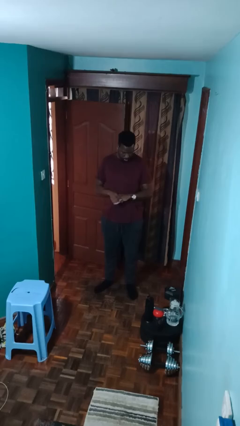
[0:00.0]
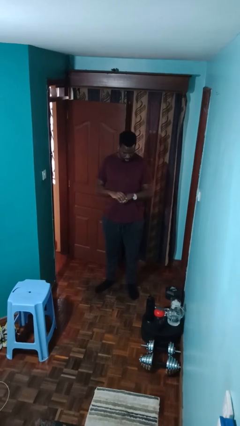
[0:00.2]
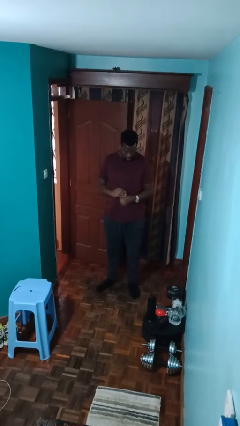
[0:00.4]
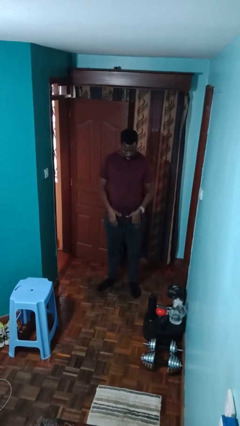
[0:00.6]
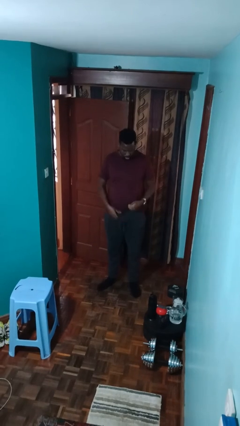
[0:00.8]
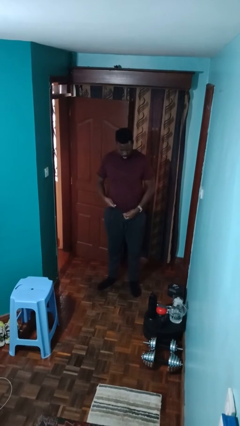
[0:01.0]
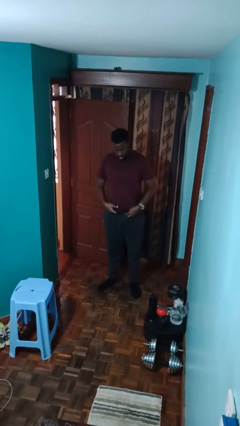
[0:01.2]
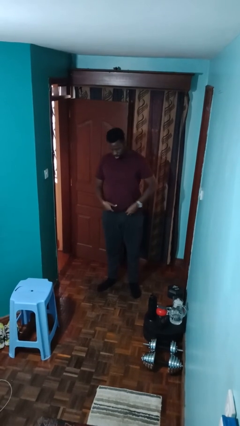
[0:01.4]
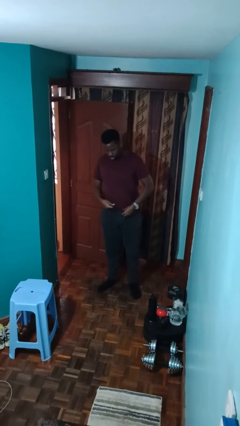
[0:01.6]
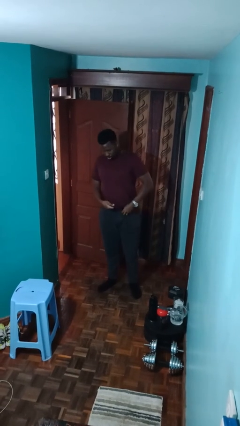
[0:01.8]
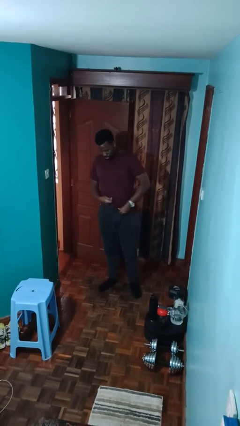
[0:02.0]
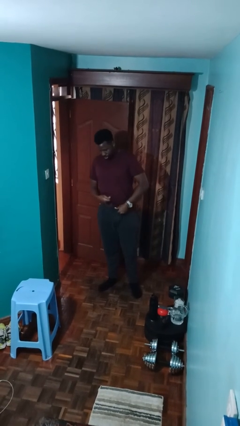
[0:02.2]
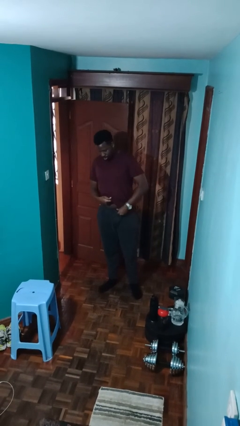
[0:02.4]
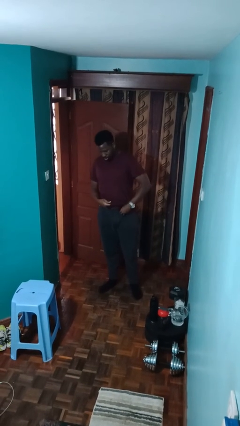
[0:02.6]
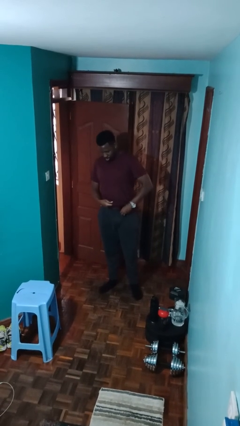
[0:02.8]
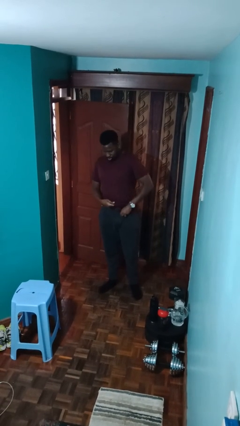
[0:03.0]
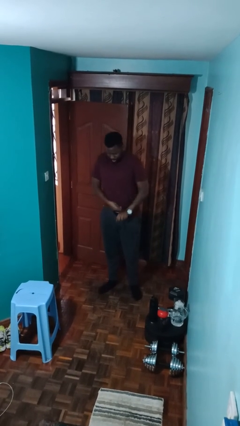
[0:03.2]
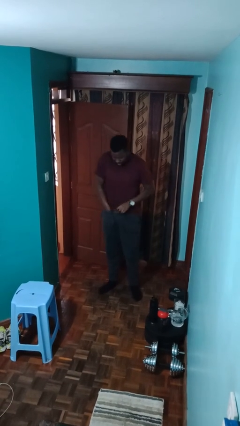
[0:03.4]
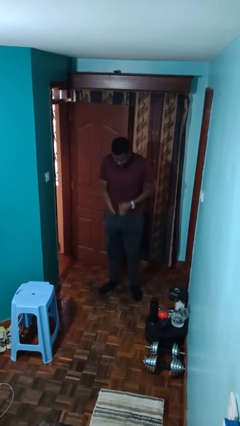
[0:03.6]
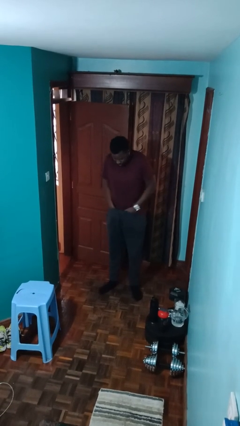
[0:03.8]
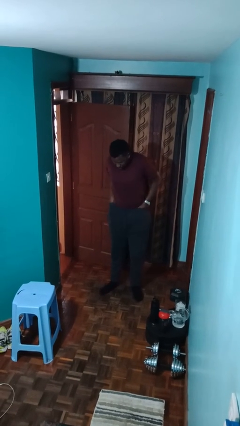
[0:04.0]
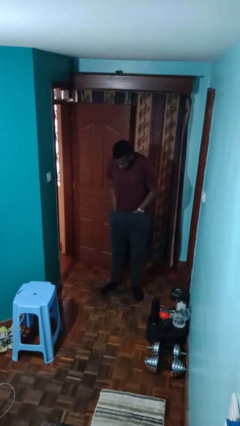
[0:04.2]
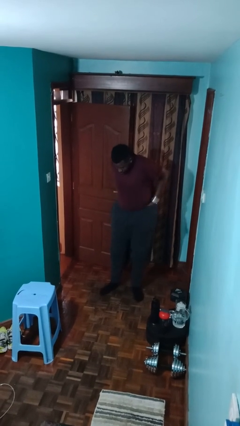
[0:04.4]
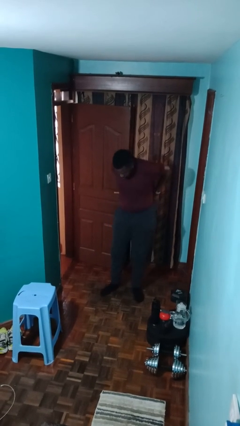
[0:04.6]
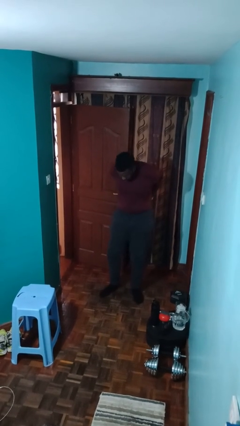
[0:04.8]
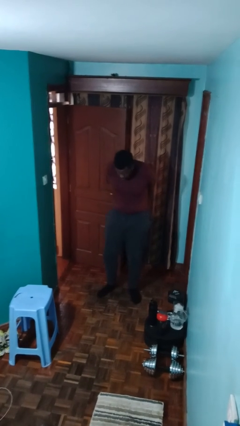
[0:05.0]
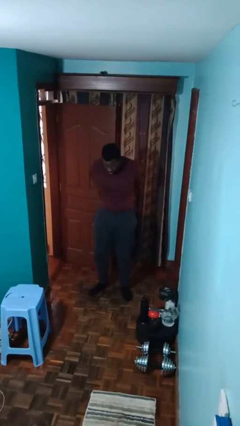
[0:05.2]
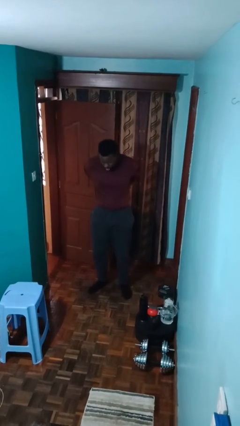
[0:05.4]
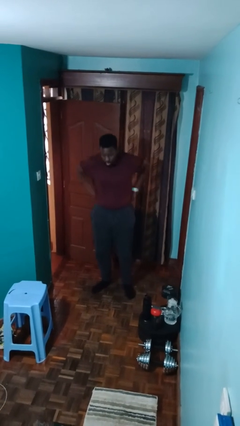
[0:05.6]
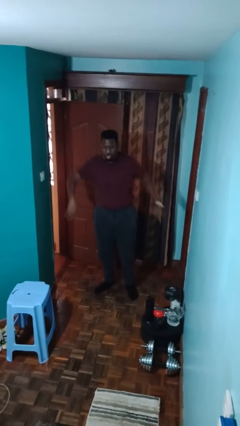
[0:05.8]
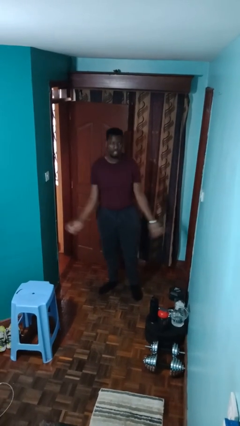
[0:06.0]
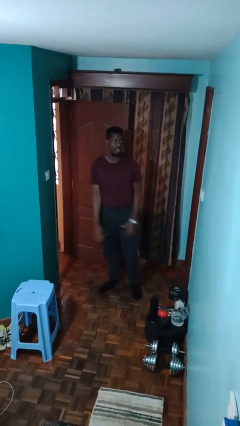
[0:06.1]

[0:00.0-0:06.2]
person tucks in shirt

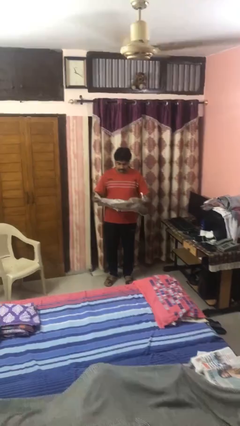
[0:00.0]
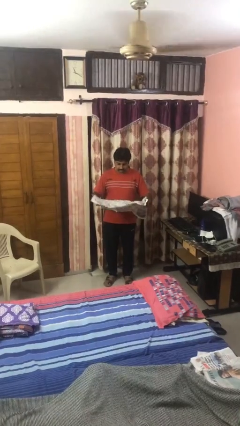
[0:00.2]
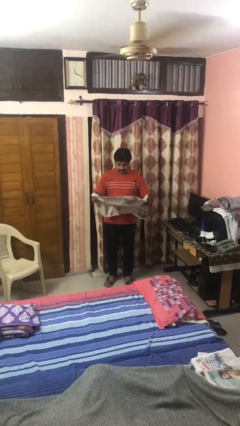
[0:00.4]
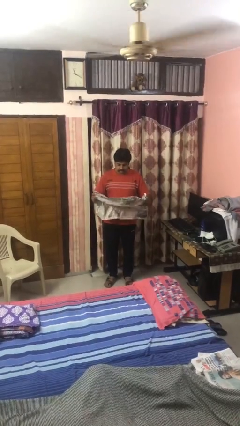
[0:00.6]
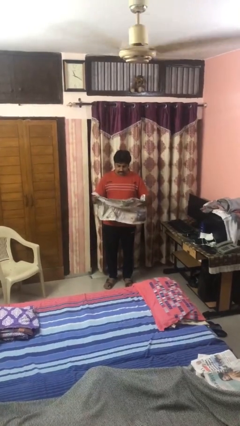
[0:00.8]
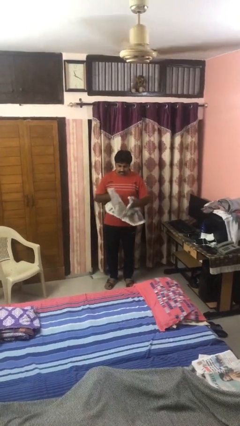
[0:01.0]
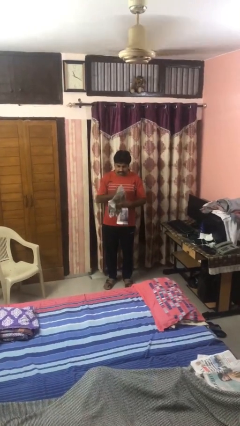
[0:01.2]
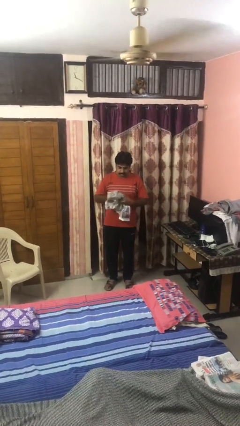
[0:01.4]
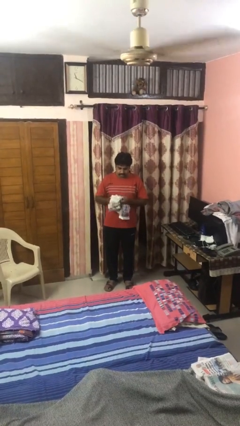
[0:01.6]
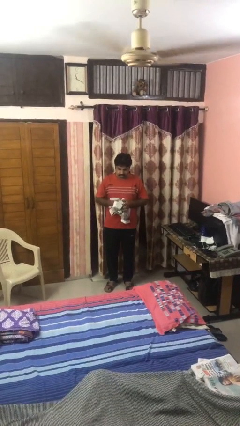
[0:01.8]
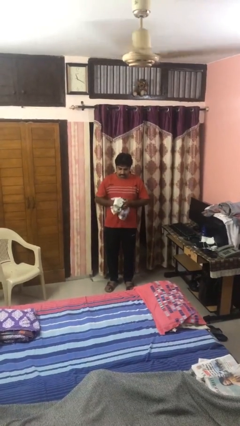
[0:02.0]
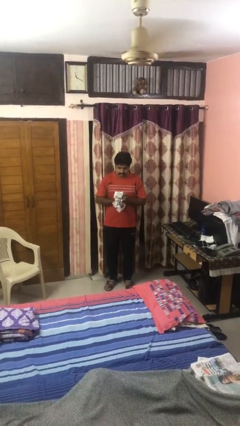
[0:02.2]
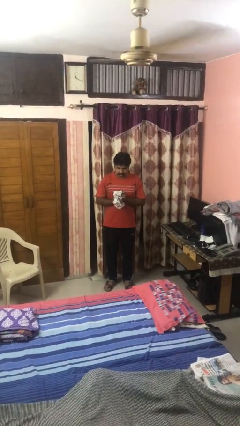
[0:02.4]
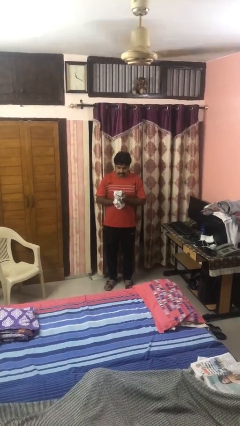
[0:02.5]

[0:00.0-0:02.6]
person crumples paper

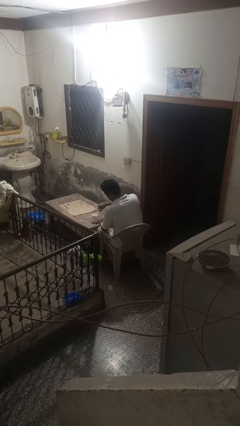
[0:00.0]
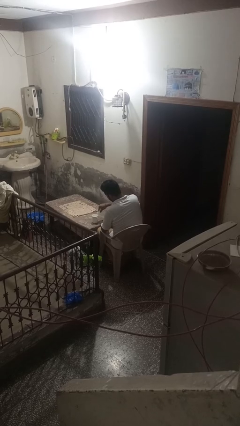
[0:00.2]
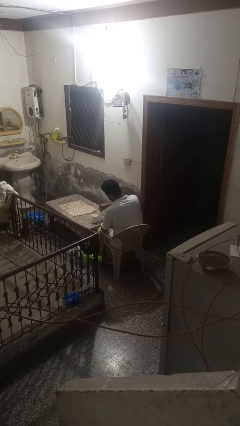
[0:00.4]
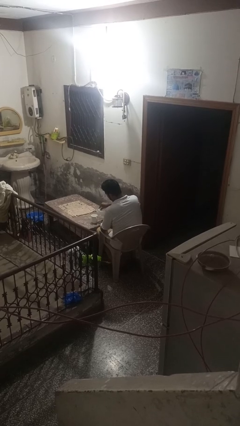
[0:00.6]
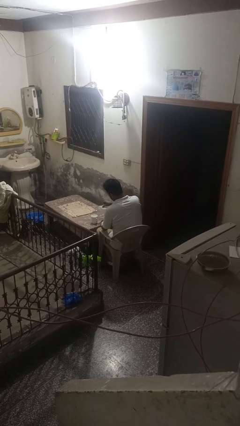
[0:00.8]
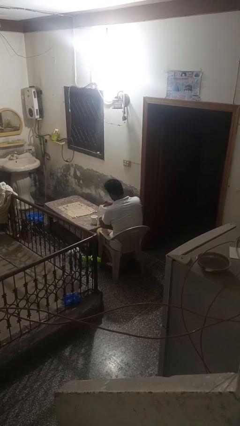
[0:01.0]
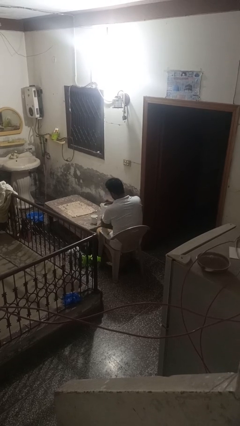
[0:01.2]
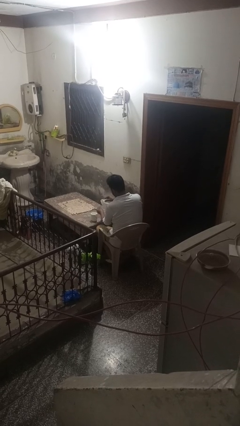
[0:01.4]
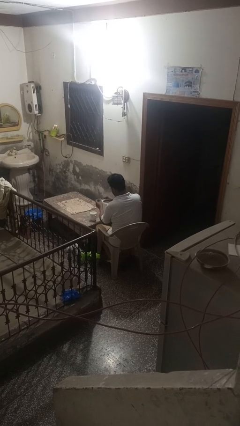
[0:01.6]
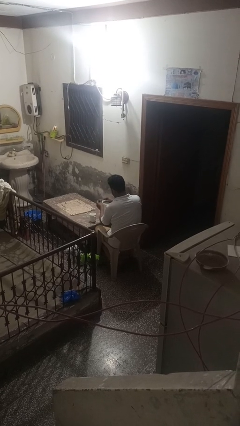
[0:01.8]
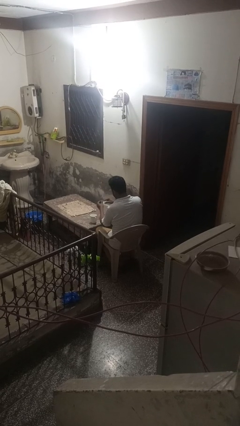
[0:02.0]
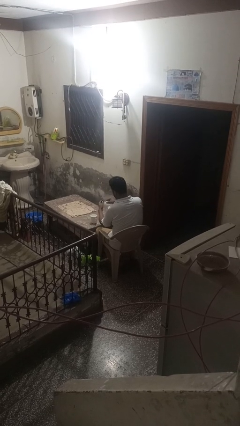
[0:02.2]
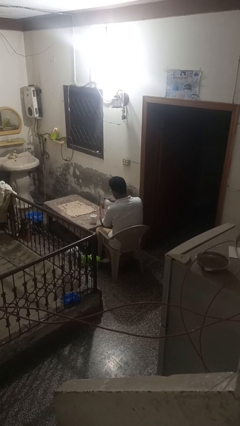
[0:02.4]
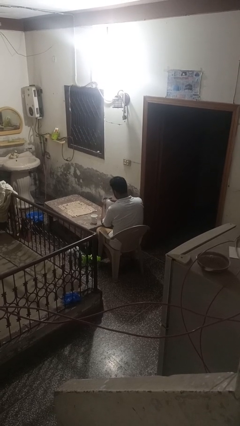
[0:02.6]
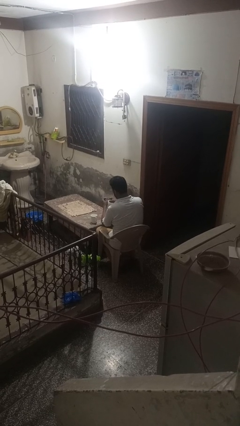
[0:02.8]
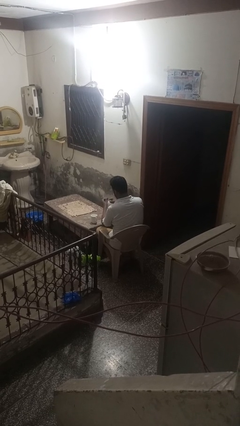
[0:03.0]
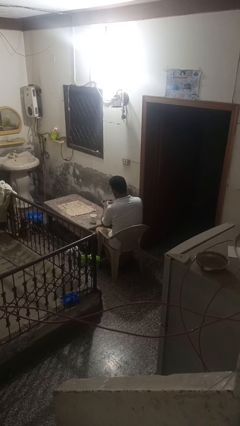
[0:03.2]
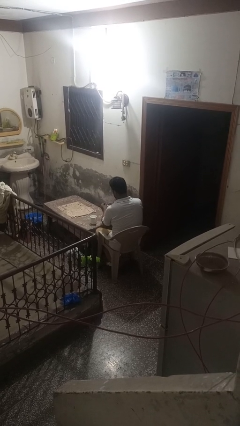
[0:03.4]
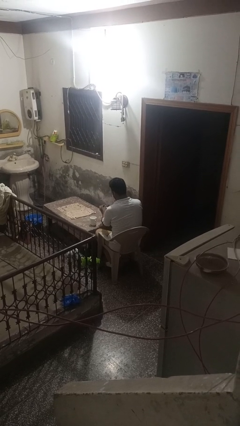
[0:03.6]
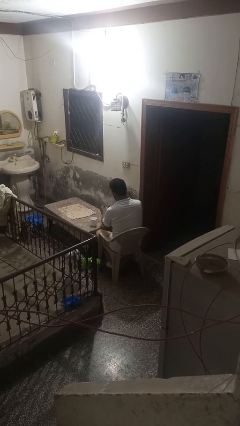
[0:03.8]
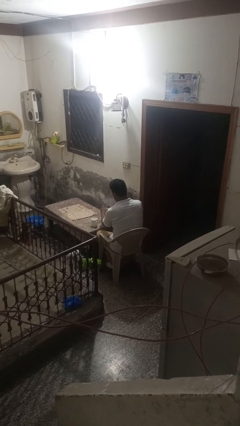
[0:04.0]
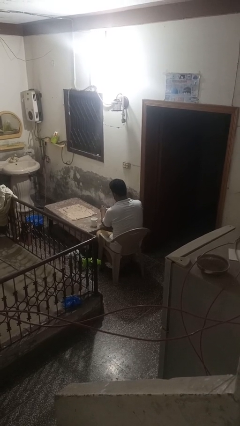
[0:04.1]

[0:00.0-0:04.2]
person screws lid to bottle

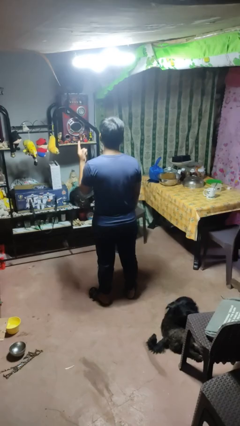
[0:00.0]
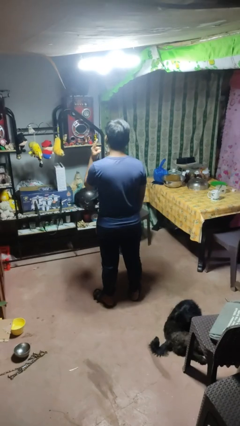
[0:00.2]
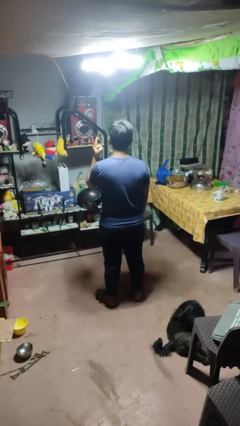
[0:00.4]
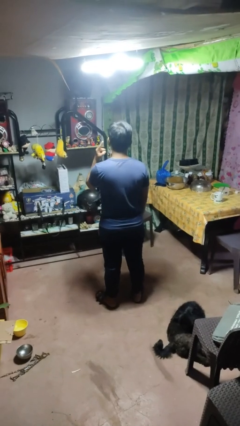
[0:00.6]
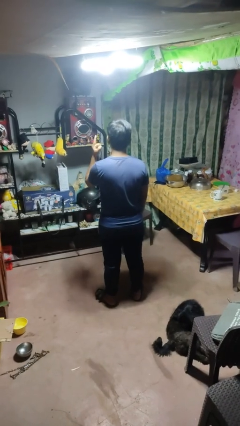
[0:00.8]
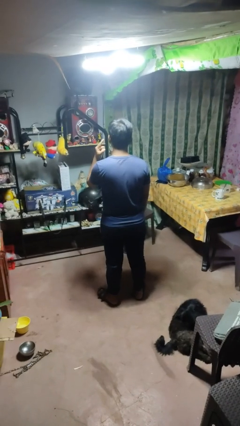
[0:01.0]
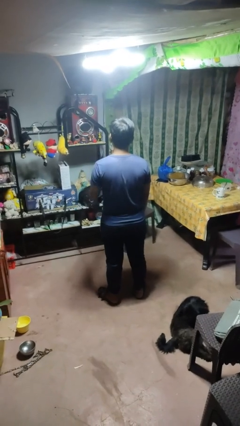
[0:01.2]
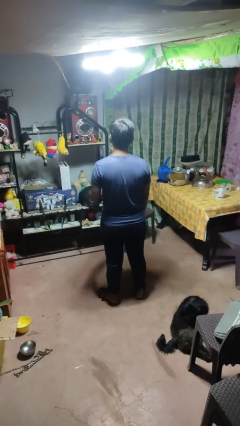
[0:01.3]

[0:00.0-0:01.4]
person gestures listen closely

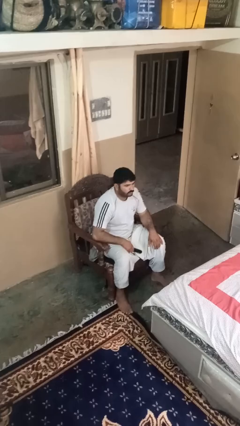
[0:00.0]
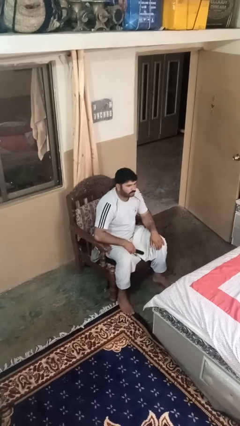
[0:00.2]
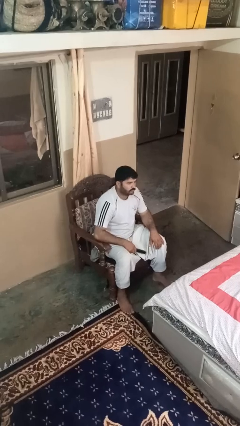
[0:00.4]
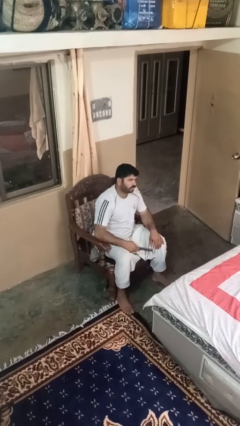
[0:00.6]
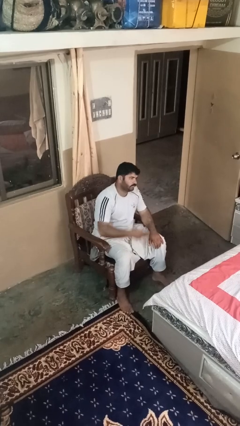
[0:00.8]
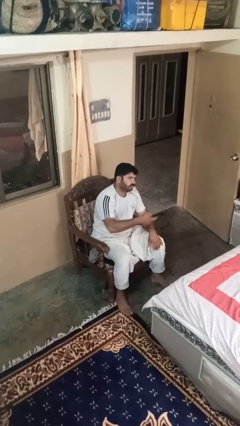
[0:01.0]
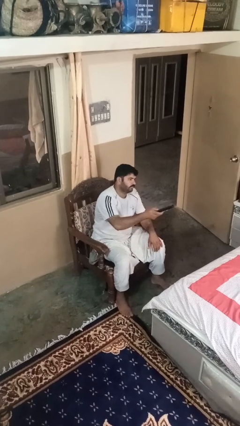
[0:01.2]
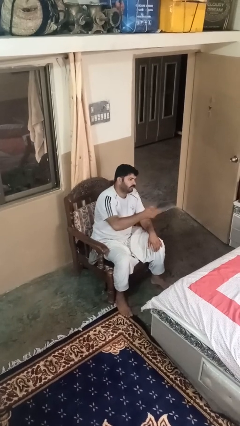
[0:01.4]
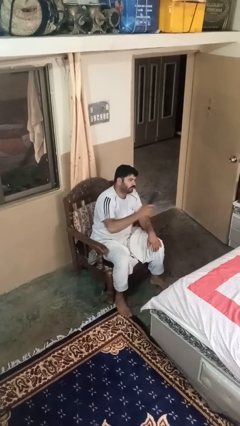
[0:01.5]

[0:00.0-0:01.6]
person uses television remote

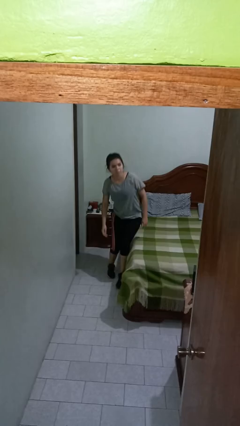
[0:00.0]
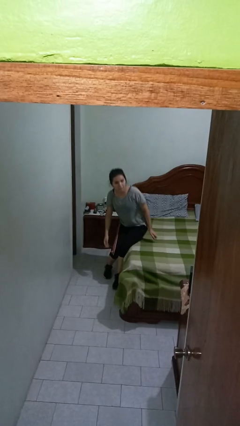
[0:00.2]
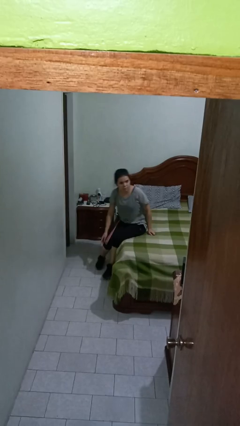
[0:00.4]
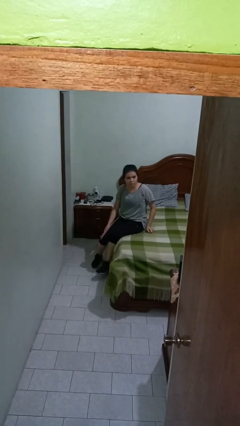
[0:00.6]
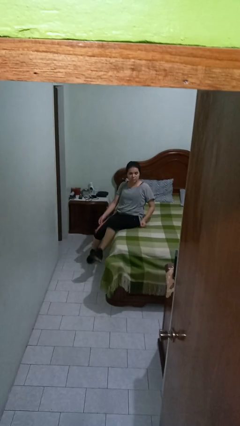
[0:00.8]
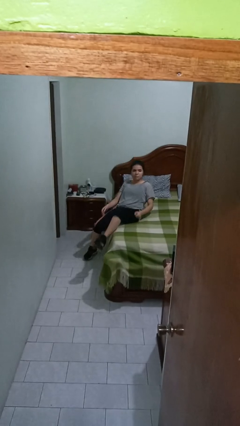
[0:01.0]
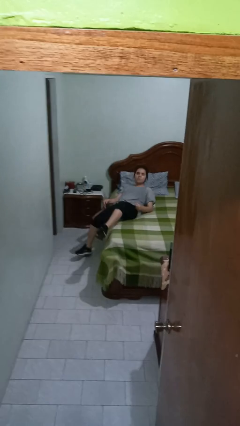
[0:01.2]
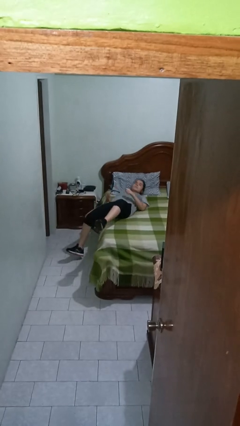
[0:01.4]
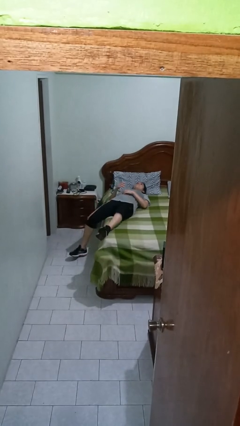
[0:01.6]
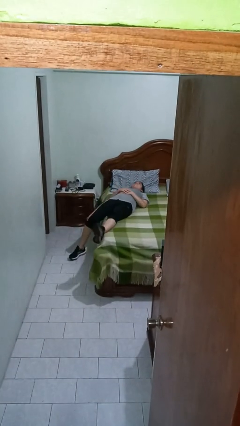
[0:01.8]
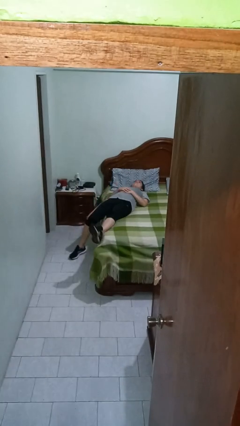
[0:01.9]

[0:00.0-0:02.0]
person lies down on bed
